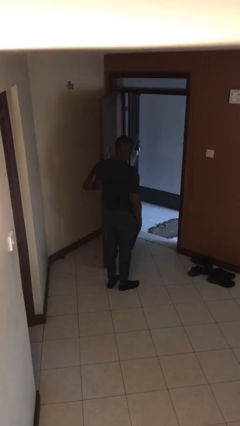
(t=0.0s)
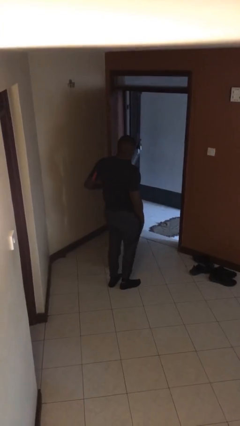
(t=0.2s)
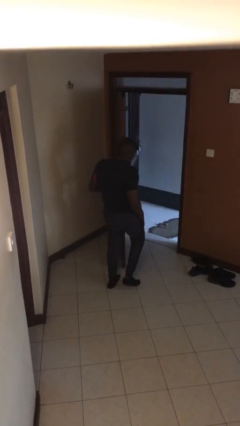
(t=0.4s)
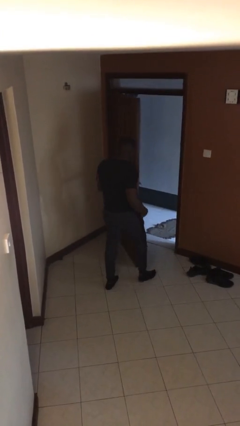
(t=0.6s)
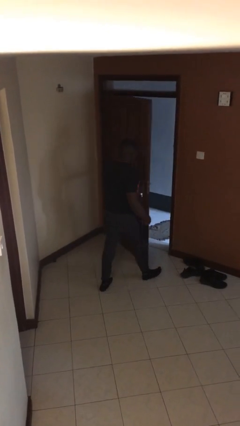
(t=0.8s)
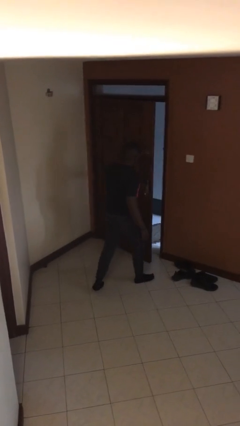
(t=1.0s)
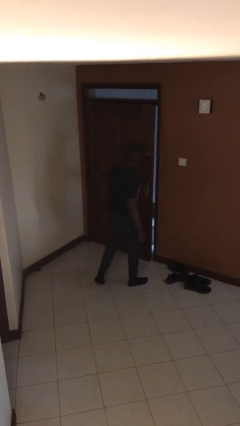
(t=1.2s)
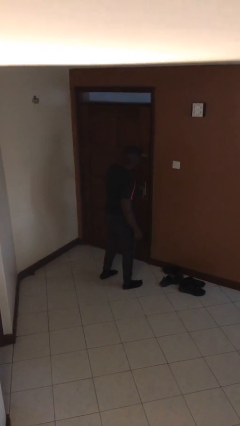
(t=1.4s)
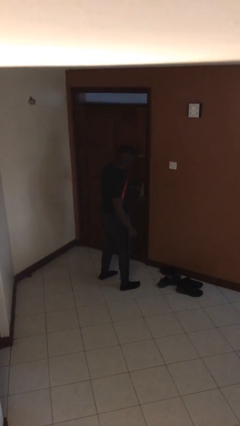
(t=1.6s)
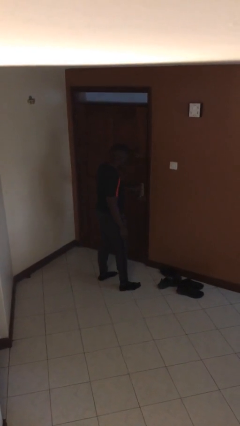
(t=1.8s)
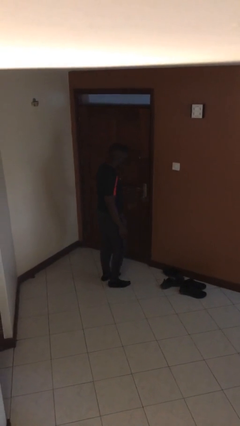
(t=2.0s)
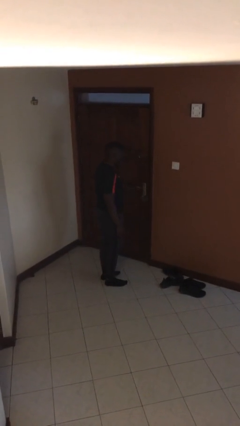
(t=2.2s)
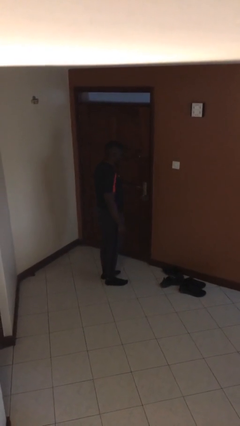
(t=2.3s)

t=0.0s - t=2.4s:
person closes facility door

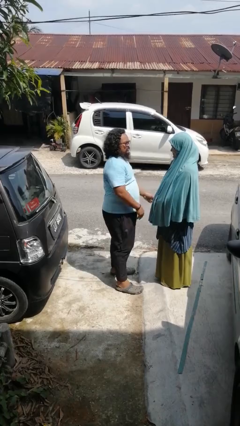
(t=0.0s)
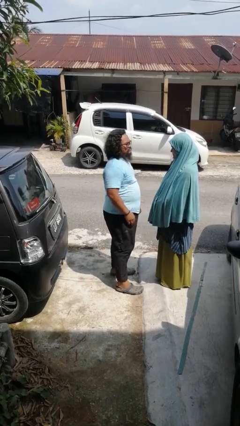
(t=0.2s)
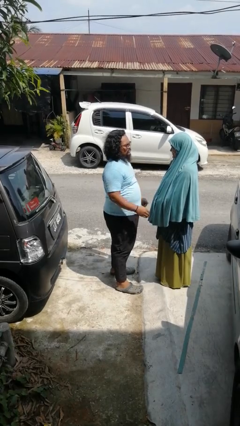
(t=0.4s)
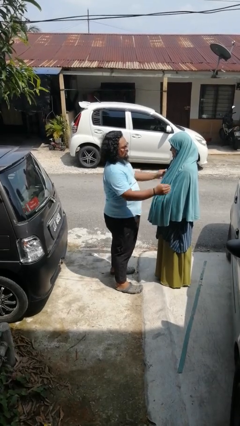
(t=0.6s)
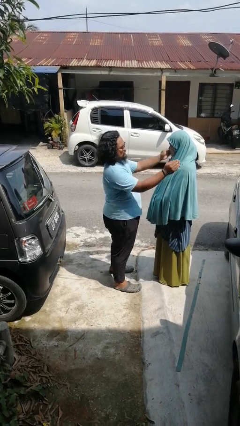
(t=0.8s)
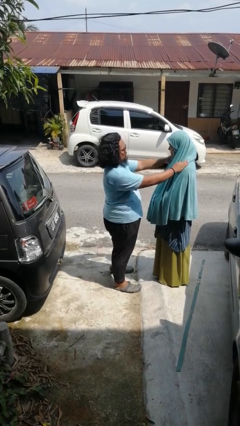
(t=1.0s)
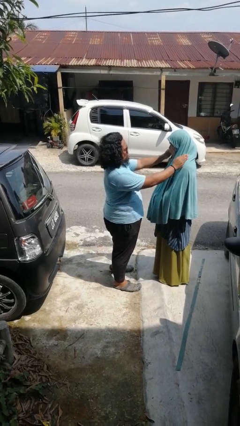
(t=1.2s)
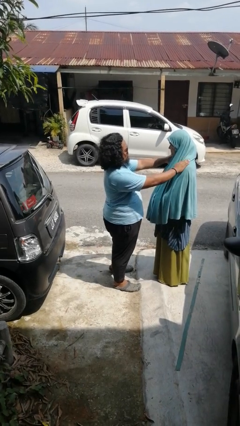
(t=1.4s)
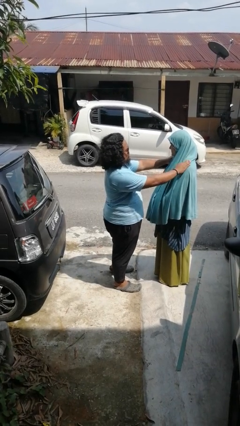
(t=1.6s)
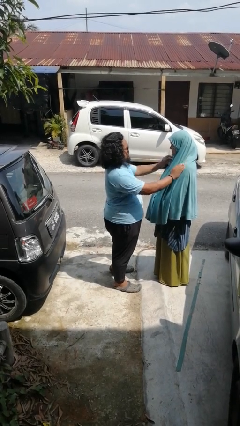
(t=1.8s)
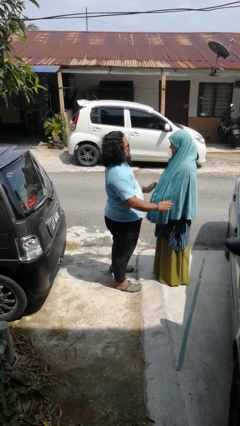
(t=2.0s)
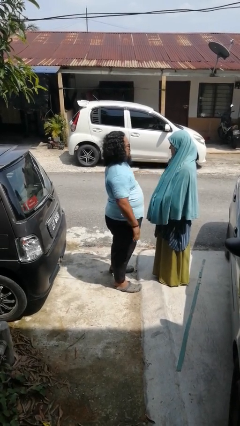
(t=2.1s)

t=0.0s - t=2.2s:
person pounds shoulders of person

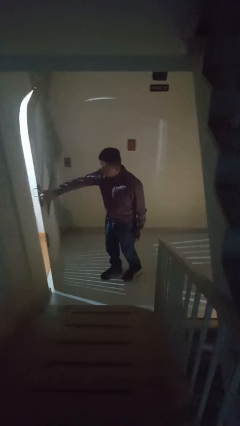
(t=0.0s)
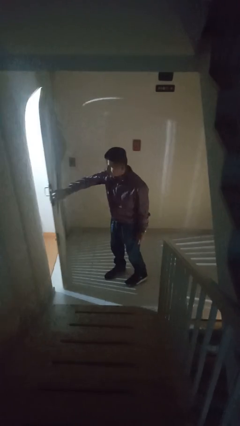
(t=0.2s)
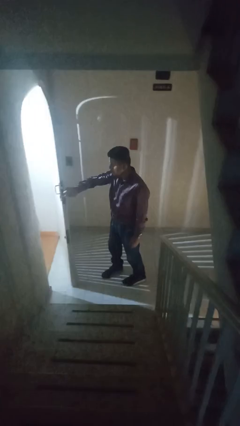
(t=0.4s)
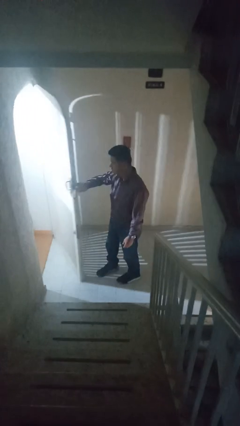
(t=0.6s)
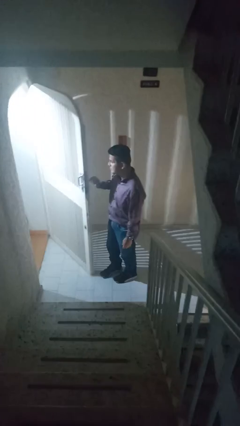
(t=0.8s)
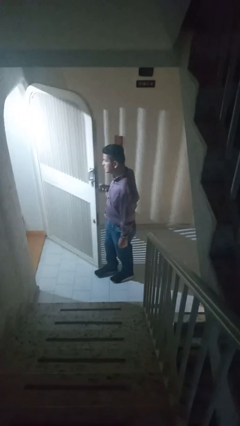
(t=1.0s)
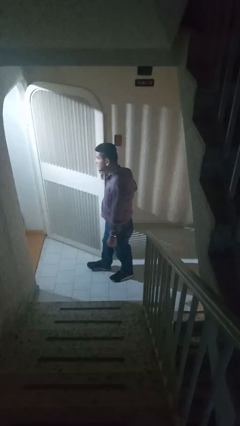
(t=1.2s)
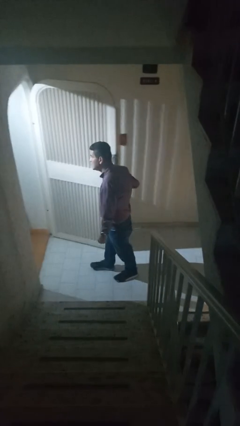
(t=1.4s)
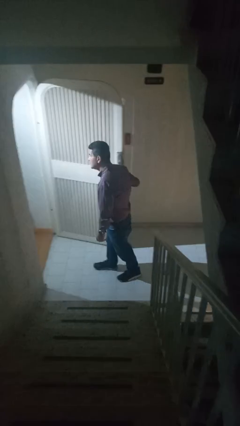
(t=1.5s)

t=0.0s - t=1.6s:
person opens facility door

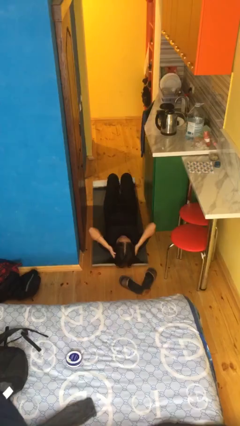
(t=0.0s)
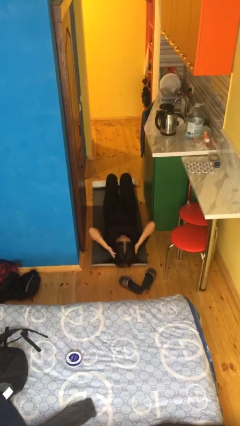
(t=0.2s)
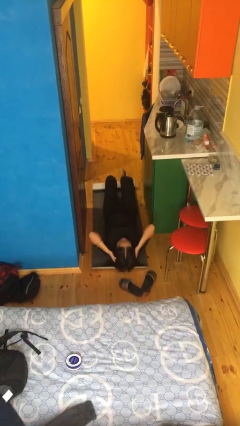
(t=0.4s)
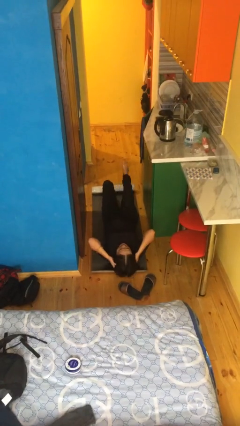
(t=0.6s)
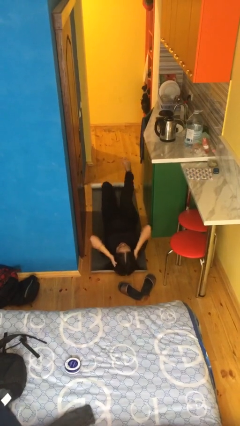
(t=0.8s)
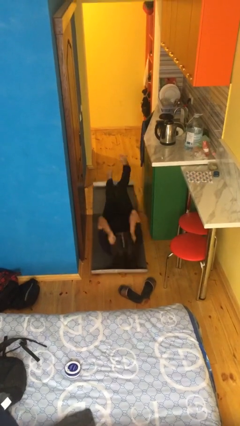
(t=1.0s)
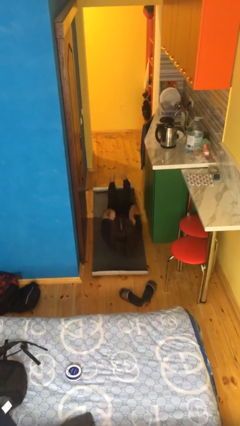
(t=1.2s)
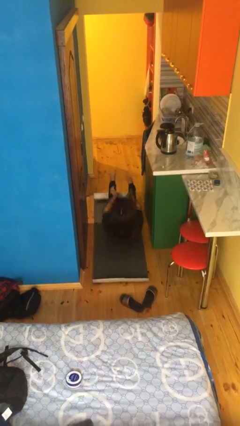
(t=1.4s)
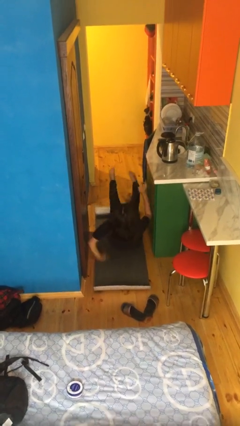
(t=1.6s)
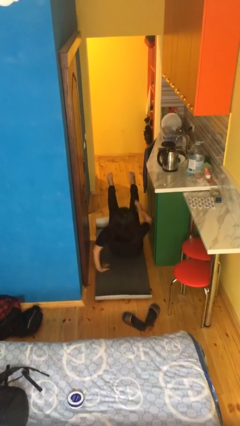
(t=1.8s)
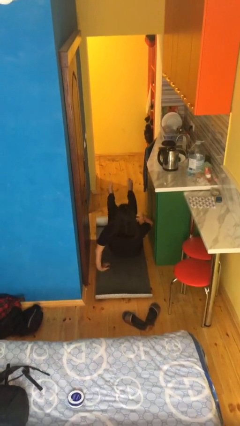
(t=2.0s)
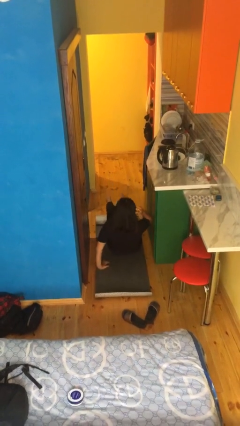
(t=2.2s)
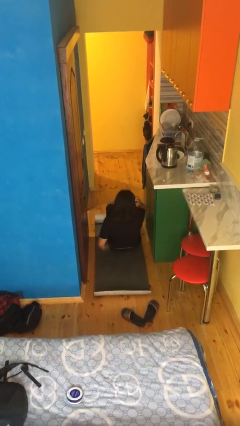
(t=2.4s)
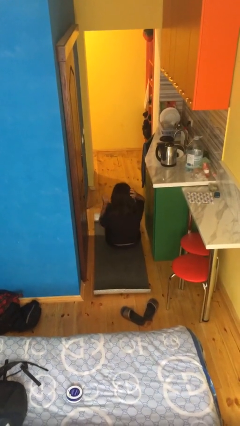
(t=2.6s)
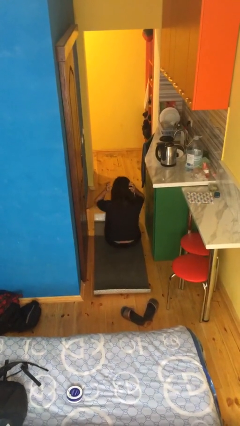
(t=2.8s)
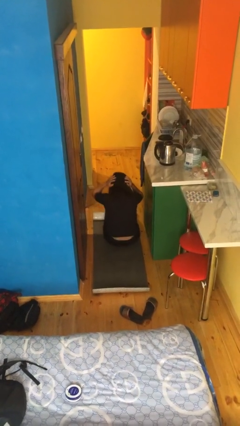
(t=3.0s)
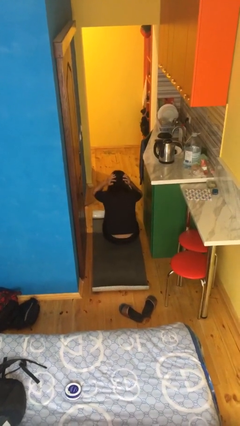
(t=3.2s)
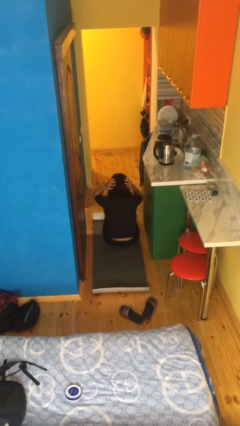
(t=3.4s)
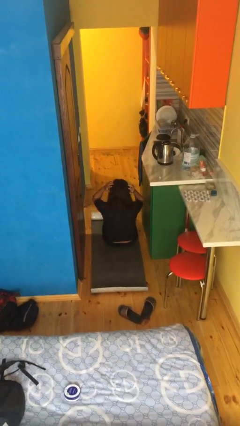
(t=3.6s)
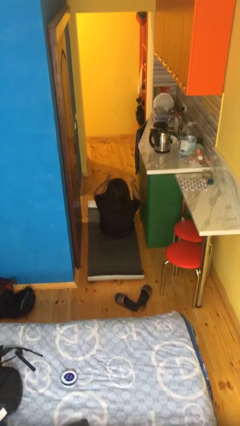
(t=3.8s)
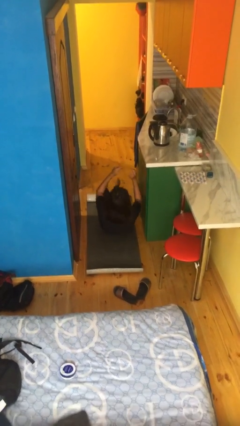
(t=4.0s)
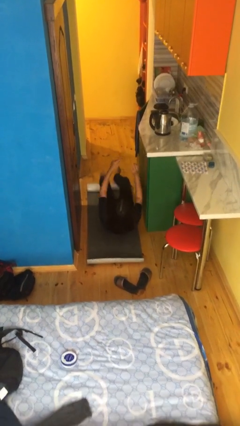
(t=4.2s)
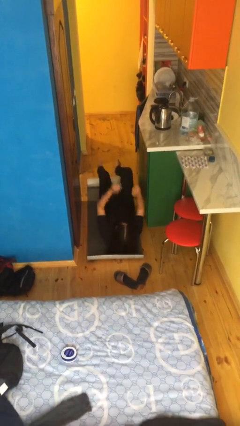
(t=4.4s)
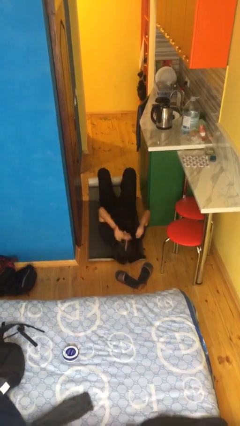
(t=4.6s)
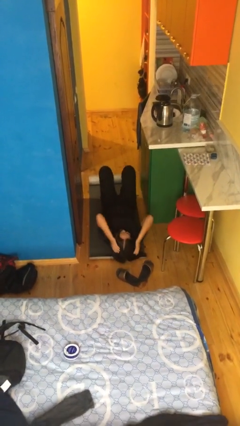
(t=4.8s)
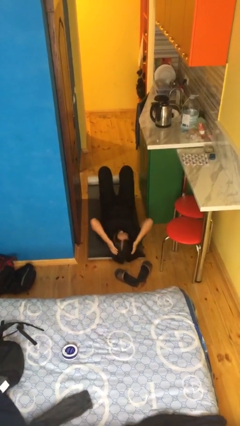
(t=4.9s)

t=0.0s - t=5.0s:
person exercises with situp

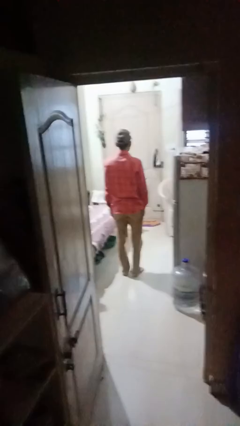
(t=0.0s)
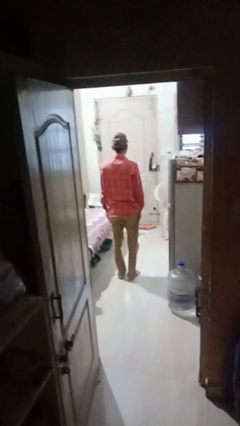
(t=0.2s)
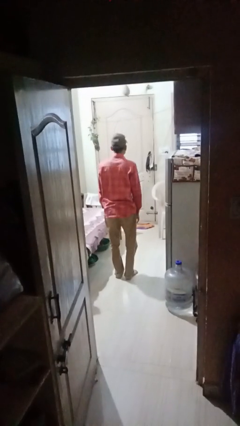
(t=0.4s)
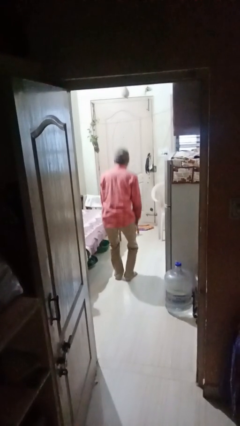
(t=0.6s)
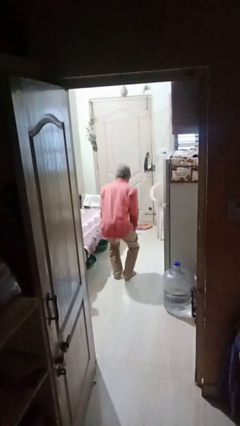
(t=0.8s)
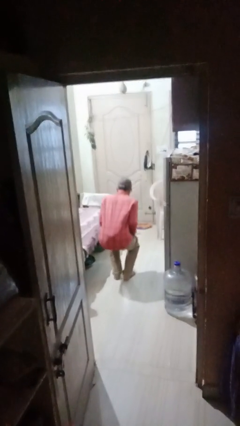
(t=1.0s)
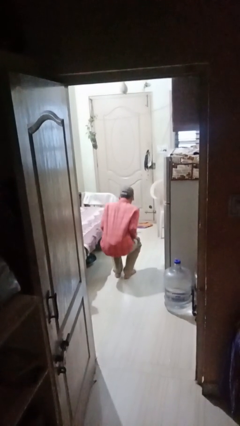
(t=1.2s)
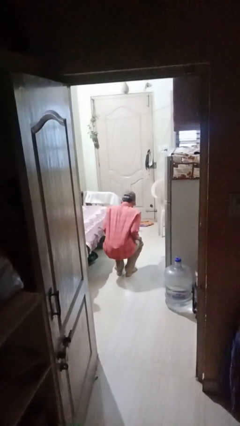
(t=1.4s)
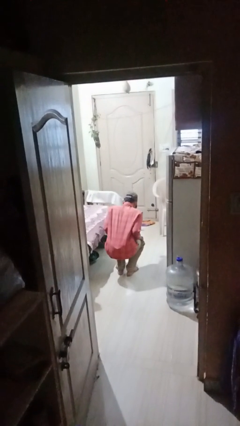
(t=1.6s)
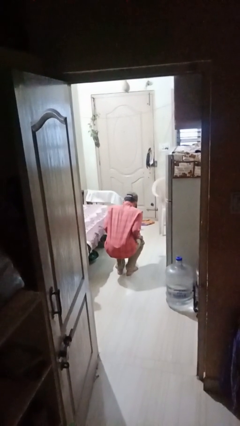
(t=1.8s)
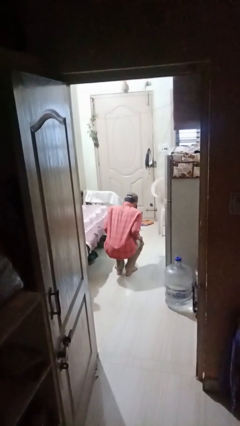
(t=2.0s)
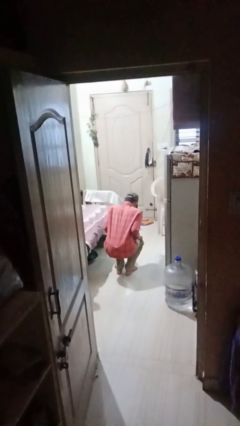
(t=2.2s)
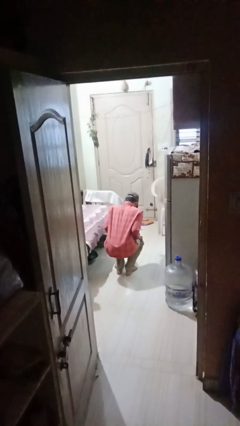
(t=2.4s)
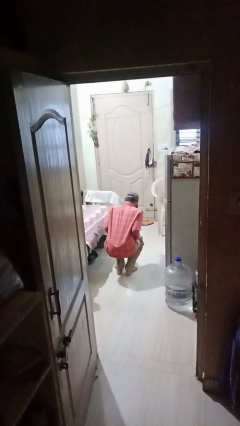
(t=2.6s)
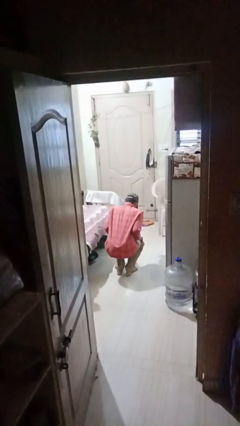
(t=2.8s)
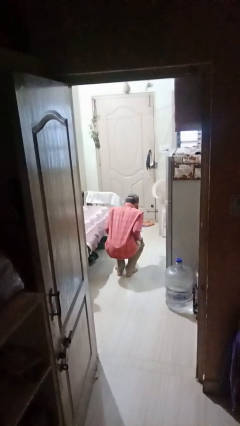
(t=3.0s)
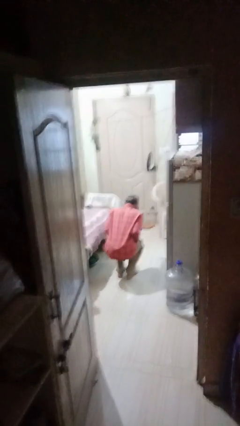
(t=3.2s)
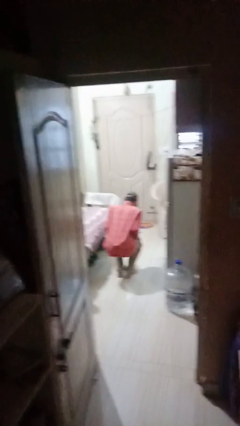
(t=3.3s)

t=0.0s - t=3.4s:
person squats

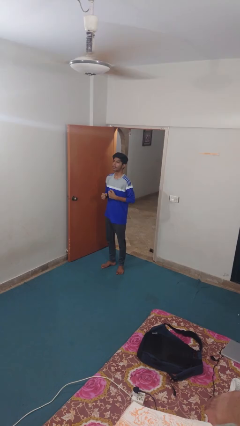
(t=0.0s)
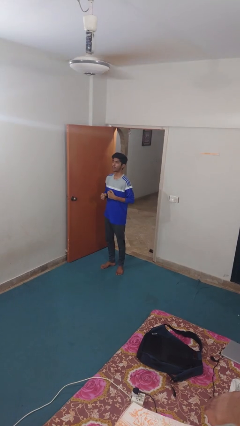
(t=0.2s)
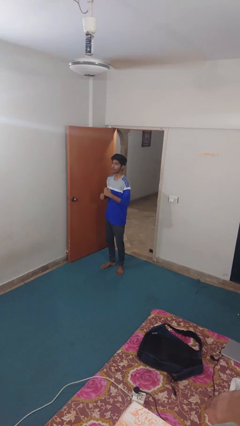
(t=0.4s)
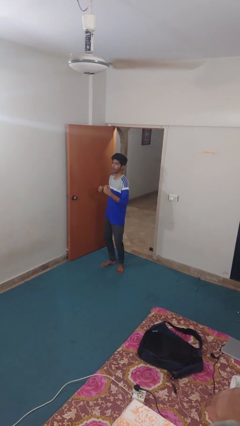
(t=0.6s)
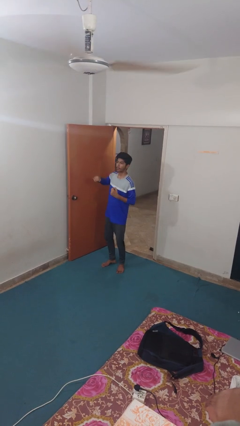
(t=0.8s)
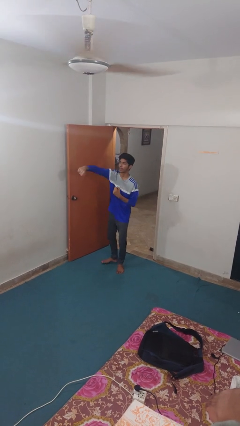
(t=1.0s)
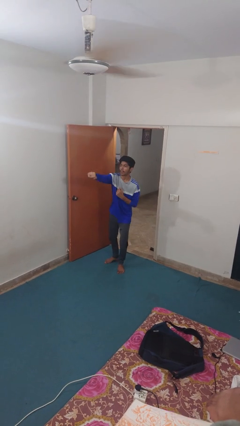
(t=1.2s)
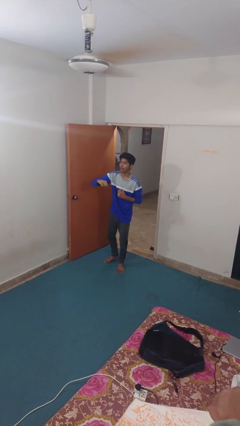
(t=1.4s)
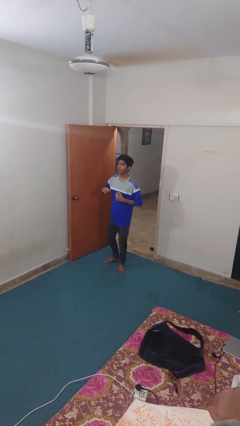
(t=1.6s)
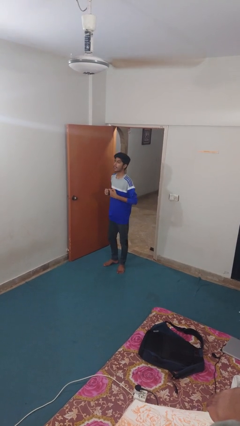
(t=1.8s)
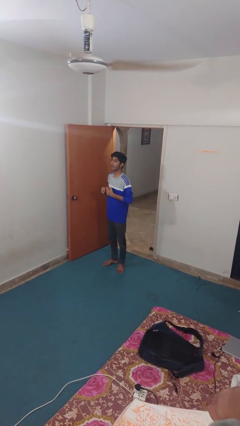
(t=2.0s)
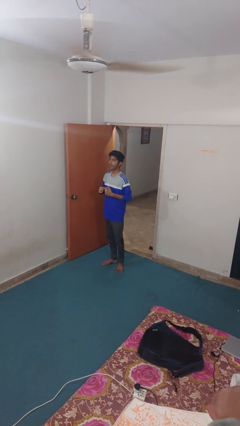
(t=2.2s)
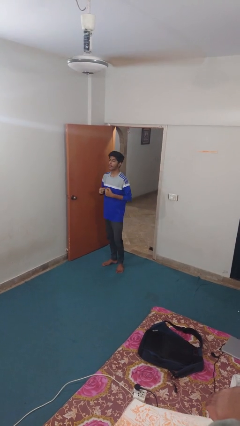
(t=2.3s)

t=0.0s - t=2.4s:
person punches

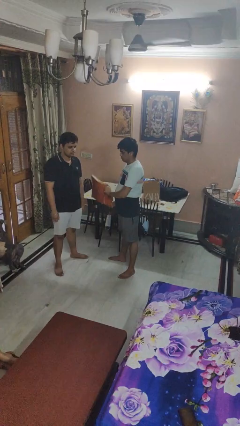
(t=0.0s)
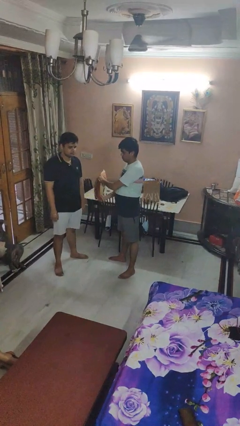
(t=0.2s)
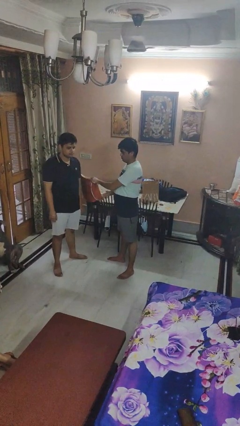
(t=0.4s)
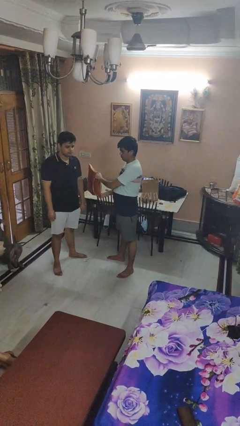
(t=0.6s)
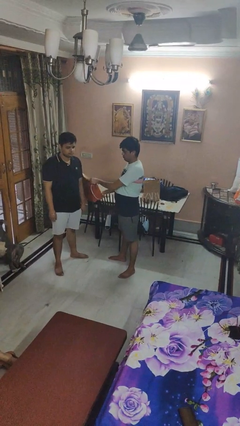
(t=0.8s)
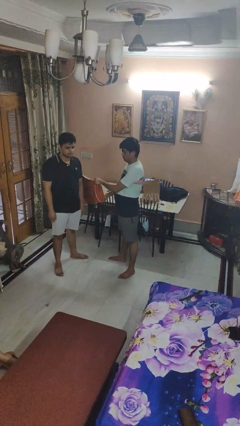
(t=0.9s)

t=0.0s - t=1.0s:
person hits person with pillow
